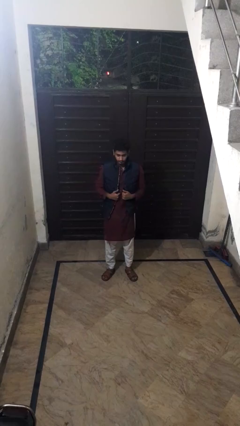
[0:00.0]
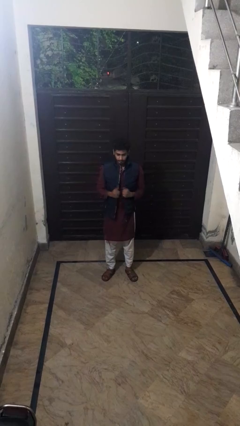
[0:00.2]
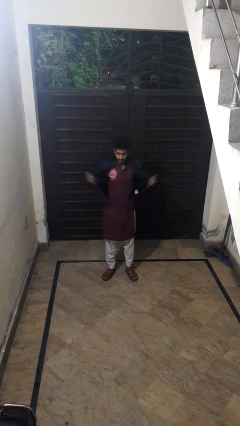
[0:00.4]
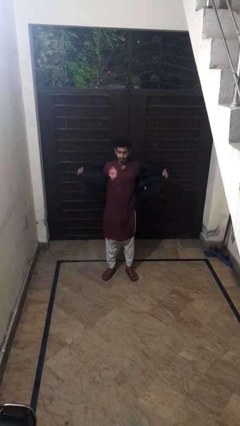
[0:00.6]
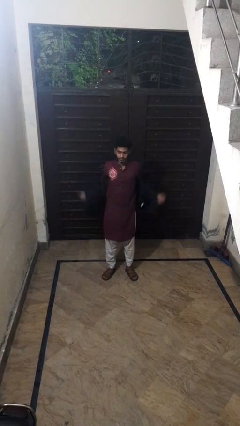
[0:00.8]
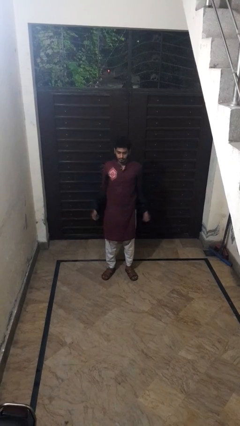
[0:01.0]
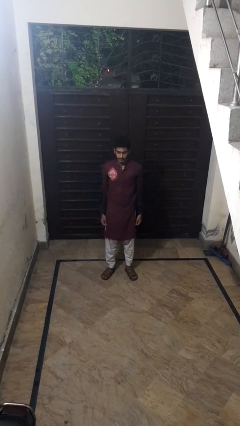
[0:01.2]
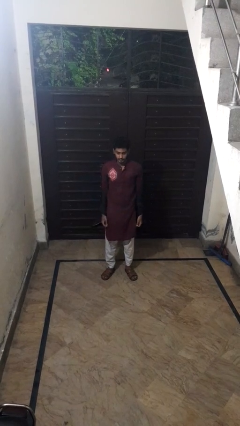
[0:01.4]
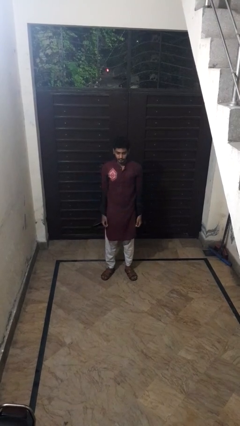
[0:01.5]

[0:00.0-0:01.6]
person takes off jacket

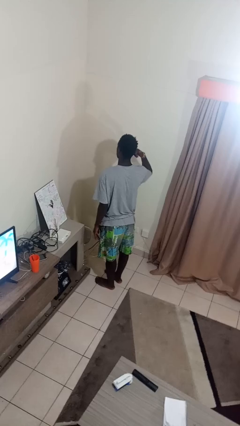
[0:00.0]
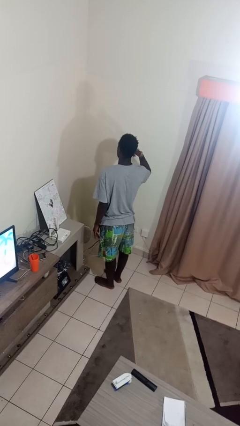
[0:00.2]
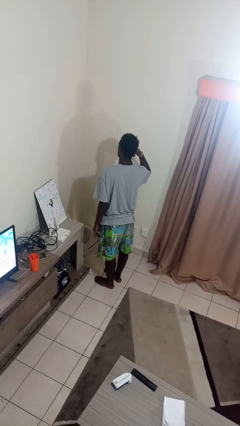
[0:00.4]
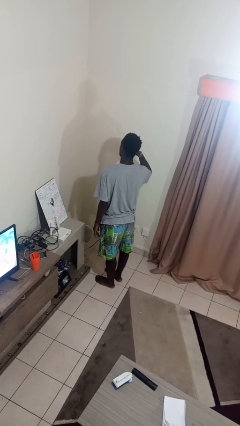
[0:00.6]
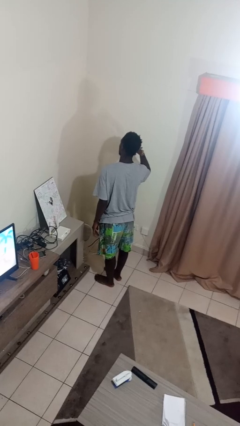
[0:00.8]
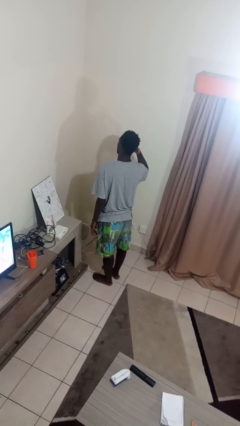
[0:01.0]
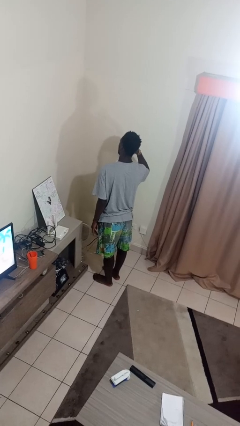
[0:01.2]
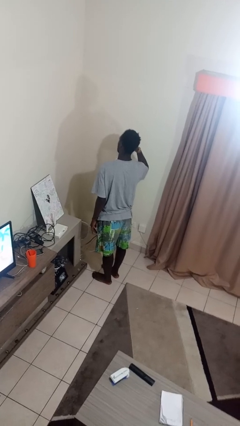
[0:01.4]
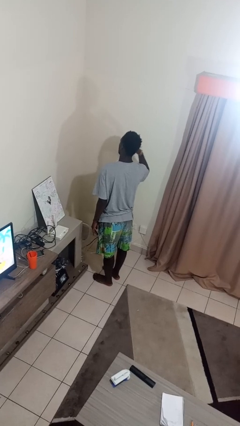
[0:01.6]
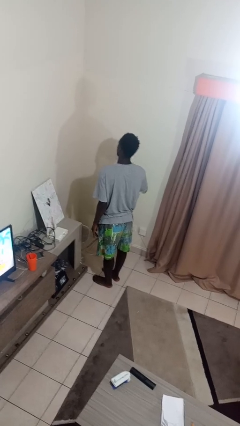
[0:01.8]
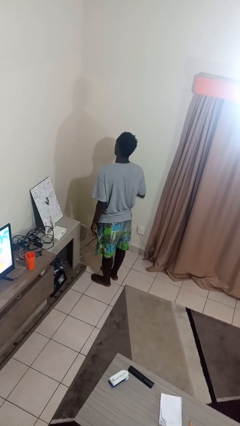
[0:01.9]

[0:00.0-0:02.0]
person gestures call me

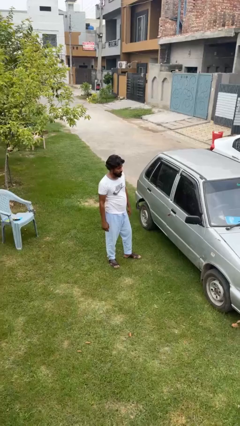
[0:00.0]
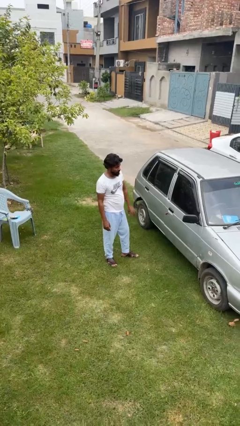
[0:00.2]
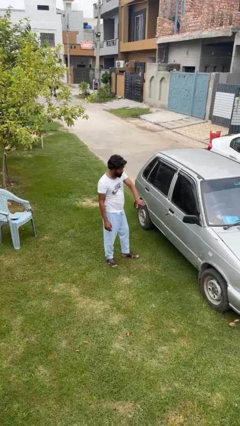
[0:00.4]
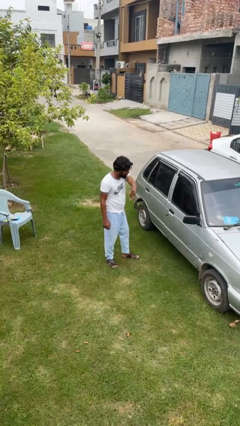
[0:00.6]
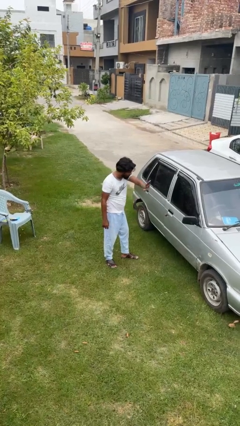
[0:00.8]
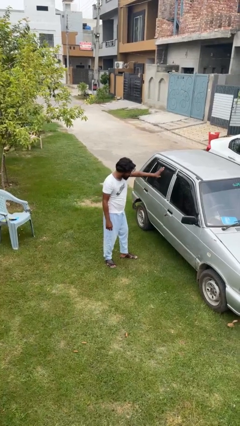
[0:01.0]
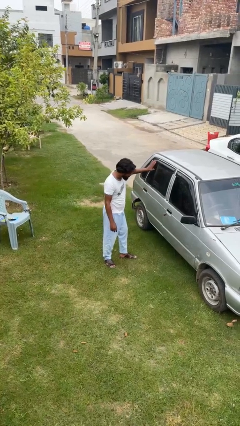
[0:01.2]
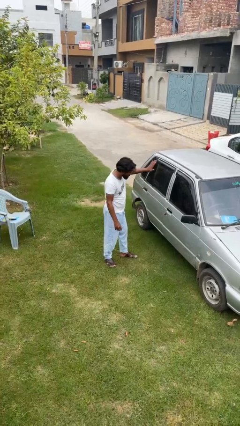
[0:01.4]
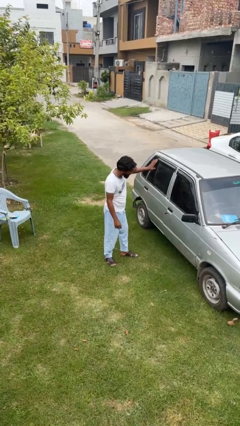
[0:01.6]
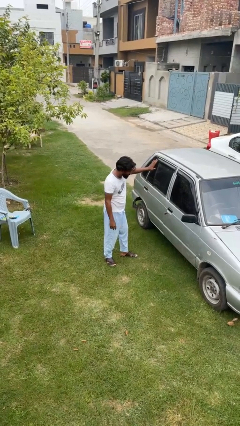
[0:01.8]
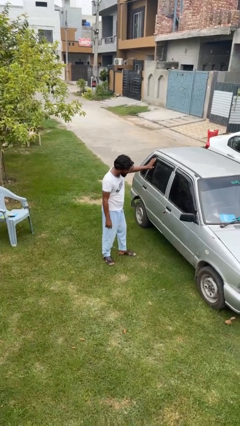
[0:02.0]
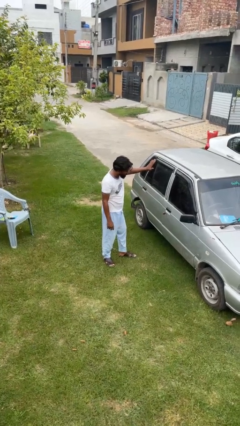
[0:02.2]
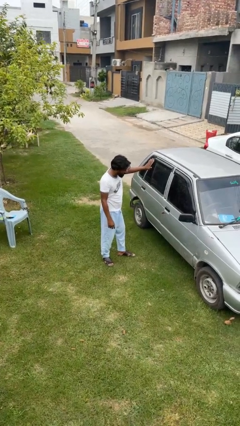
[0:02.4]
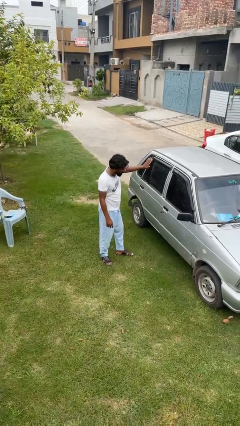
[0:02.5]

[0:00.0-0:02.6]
person gestures swipe left

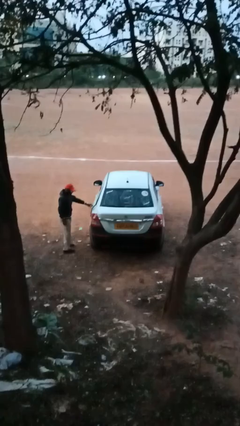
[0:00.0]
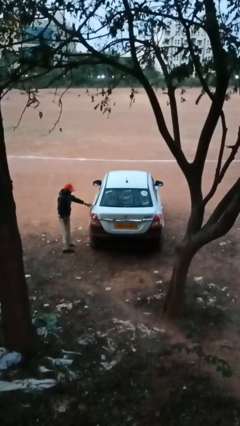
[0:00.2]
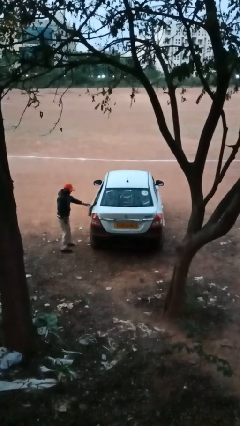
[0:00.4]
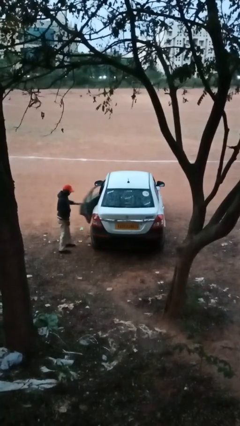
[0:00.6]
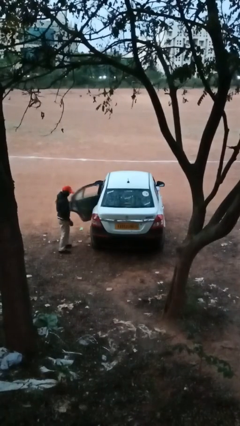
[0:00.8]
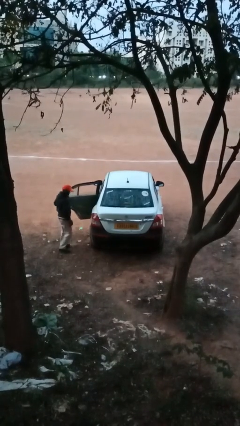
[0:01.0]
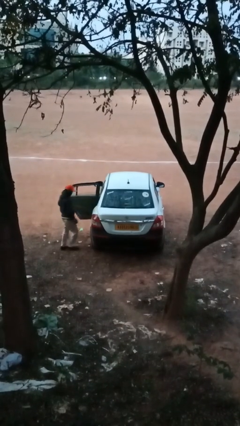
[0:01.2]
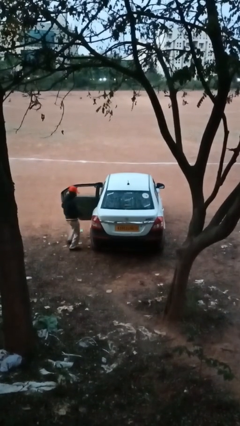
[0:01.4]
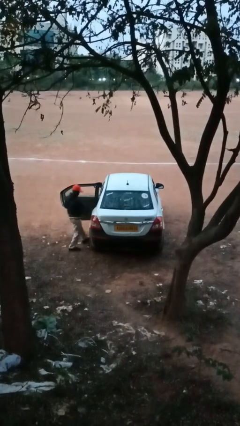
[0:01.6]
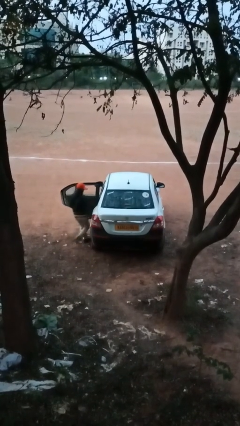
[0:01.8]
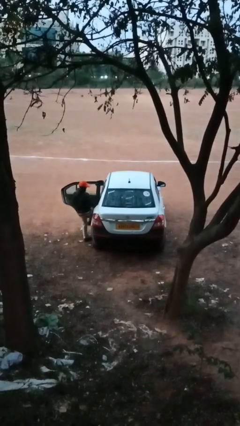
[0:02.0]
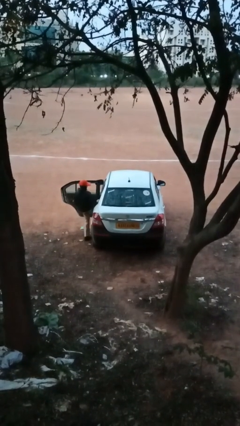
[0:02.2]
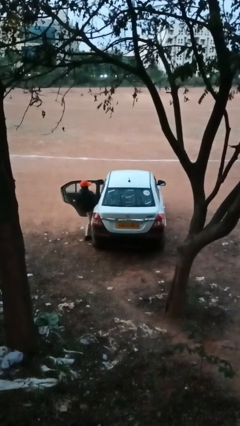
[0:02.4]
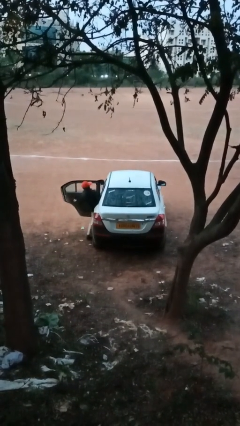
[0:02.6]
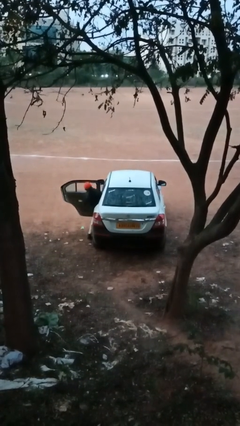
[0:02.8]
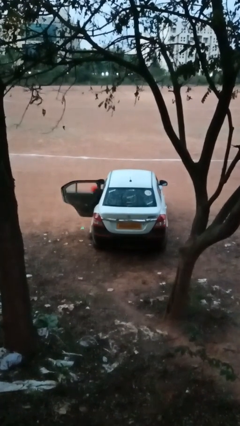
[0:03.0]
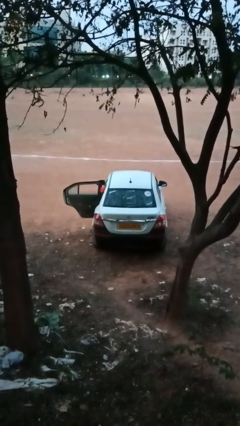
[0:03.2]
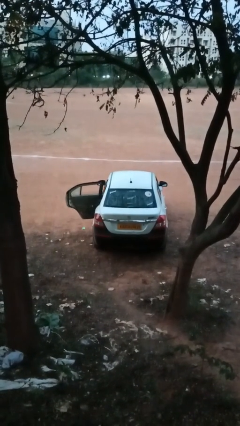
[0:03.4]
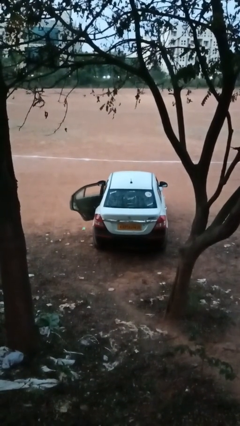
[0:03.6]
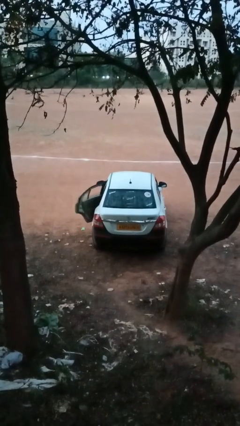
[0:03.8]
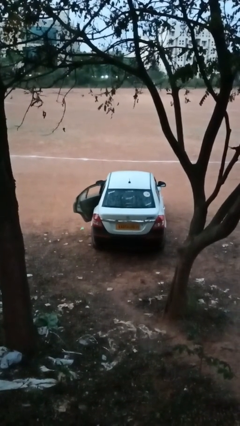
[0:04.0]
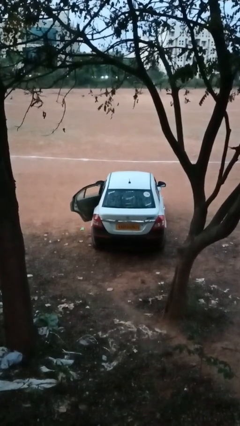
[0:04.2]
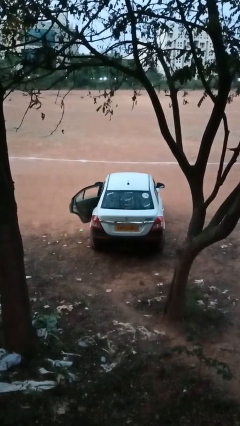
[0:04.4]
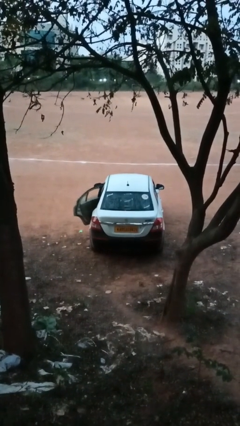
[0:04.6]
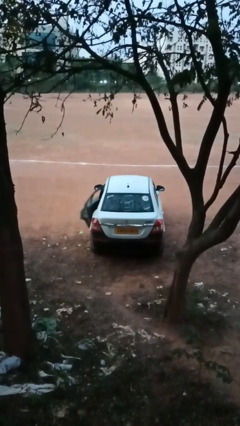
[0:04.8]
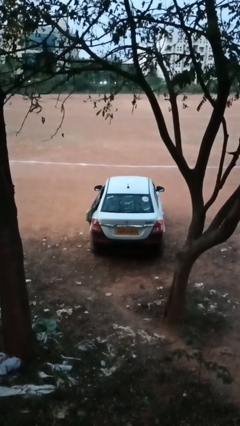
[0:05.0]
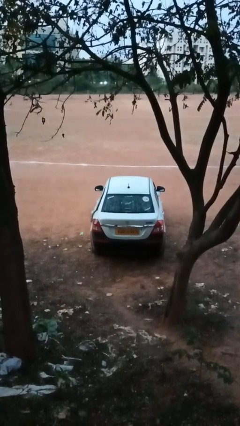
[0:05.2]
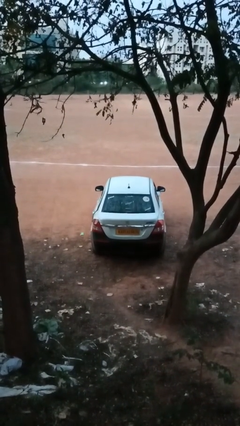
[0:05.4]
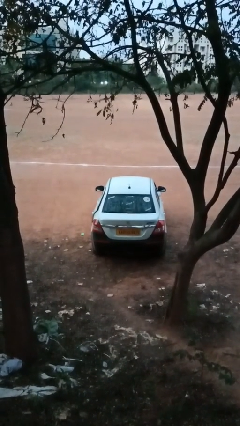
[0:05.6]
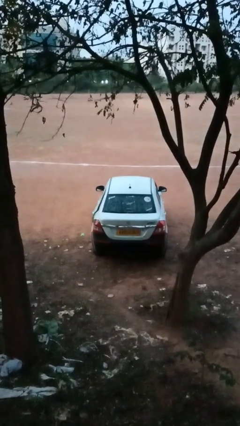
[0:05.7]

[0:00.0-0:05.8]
car picks up person

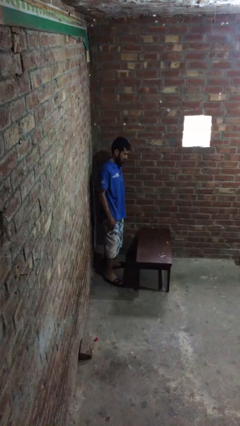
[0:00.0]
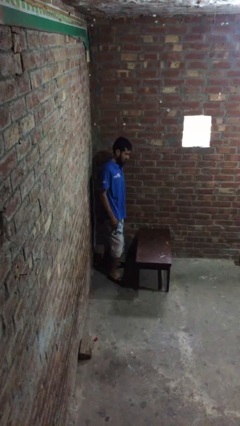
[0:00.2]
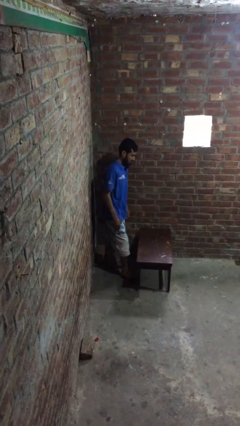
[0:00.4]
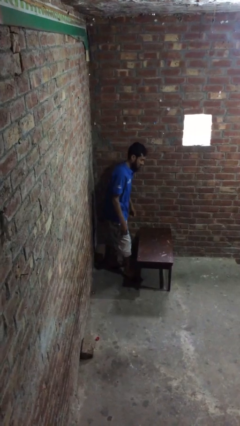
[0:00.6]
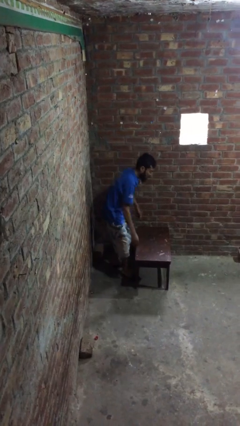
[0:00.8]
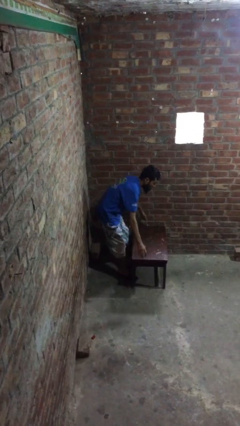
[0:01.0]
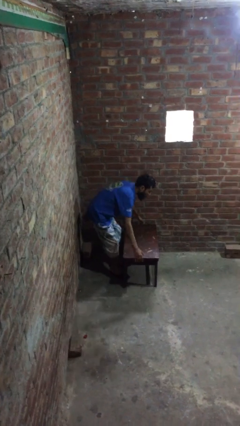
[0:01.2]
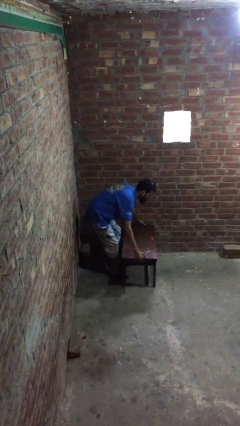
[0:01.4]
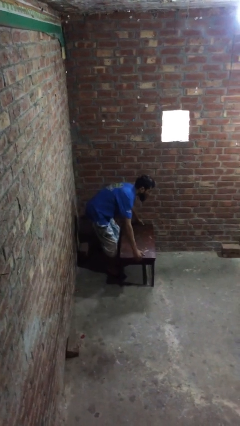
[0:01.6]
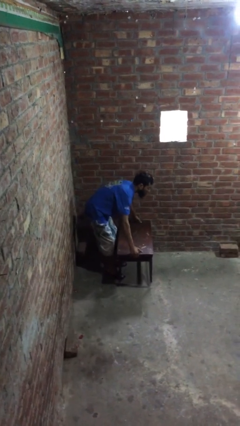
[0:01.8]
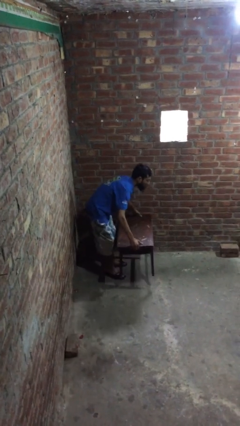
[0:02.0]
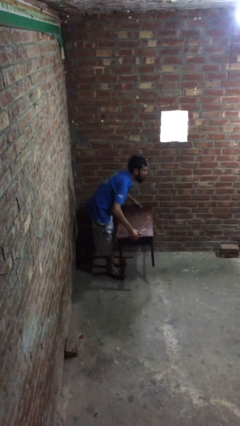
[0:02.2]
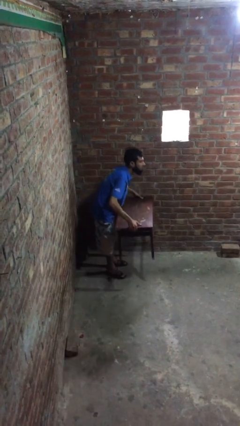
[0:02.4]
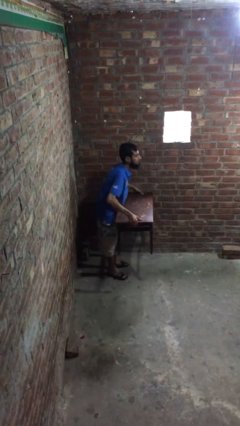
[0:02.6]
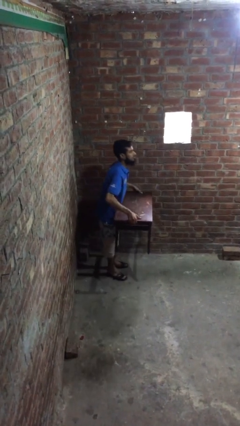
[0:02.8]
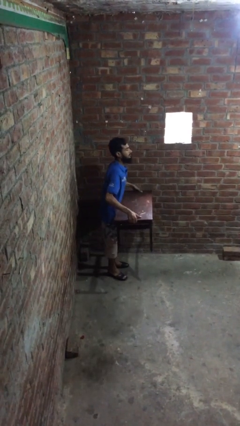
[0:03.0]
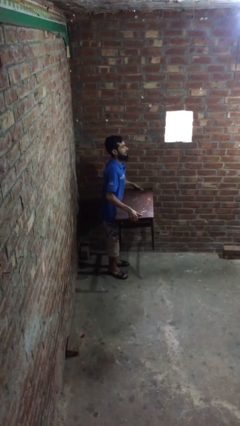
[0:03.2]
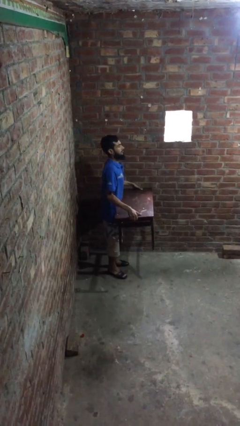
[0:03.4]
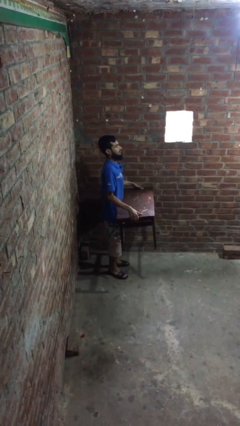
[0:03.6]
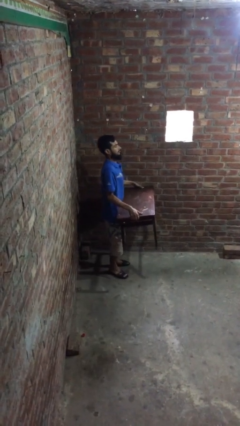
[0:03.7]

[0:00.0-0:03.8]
person picks up object from floor

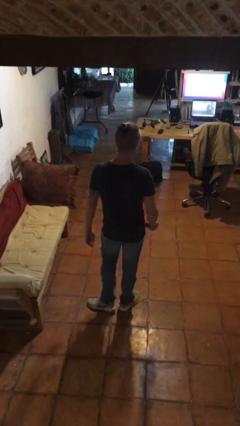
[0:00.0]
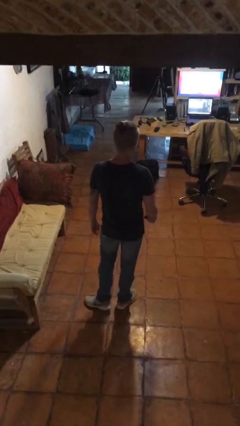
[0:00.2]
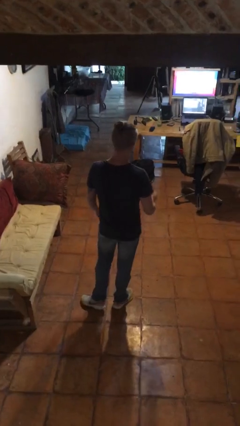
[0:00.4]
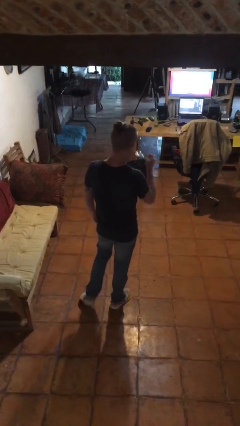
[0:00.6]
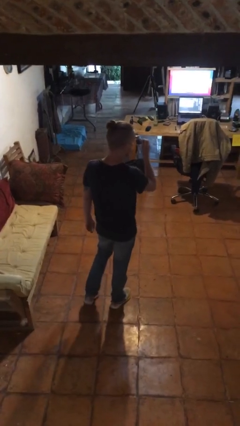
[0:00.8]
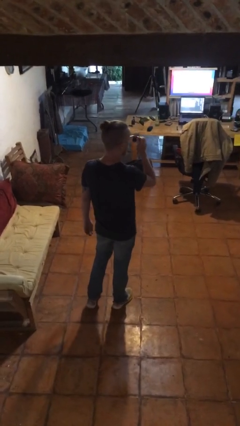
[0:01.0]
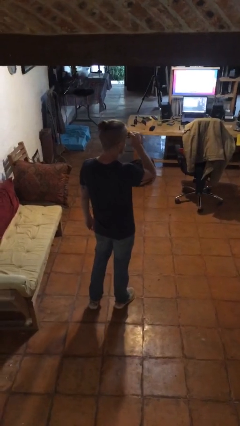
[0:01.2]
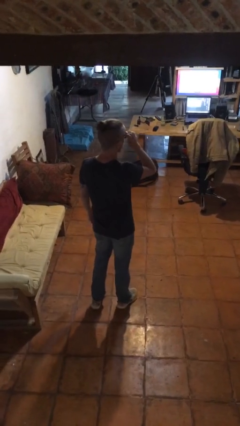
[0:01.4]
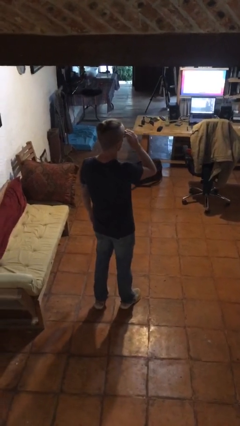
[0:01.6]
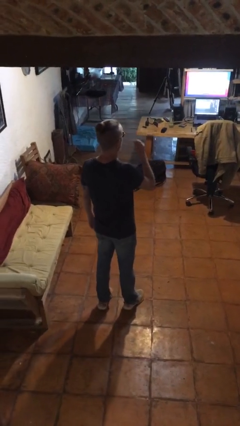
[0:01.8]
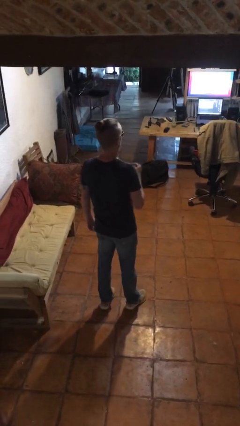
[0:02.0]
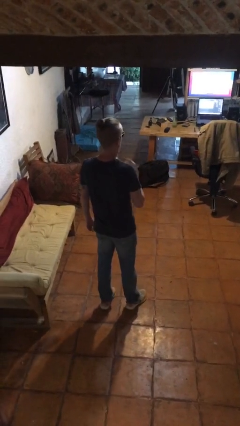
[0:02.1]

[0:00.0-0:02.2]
person puts on sunglasses
